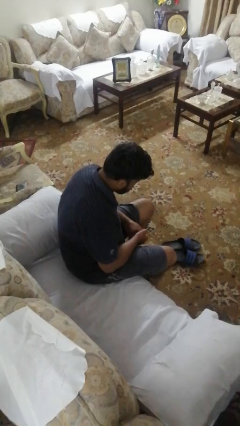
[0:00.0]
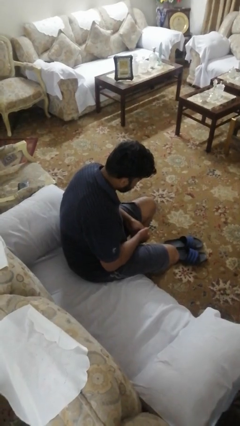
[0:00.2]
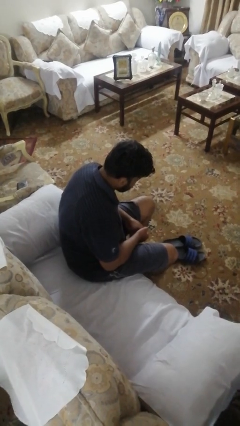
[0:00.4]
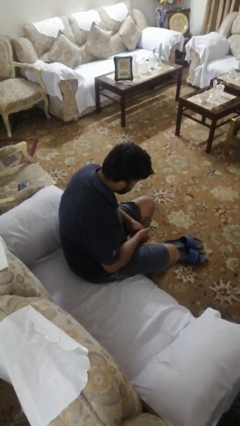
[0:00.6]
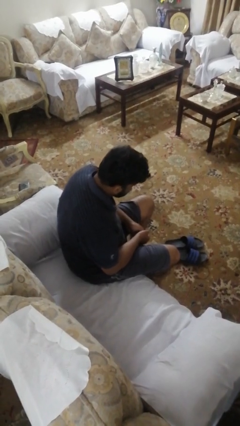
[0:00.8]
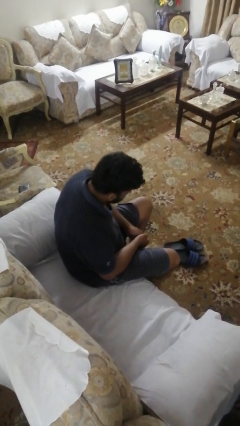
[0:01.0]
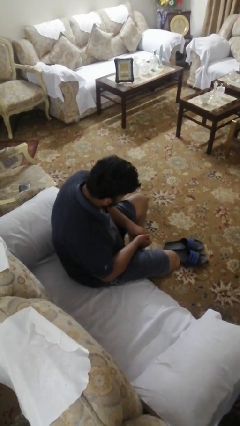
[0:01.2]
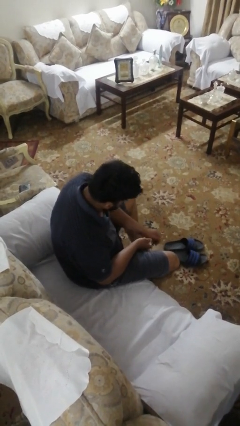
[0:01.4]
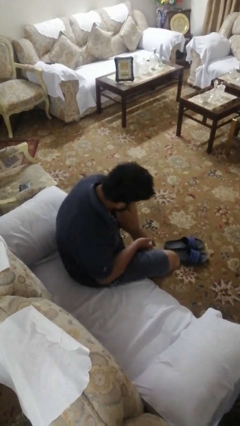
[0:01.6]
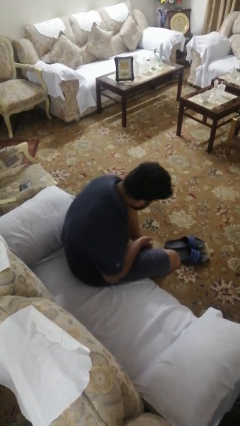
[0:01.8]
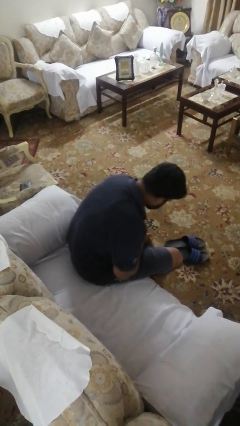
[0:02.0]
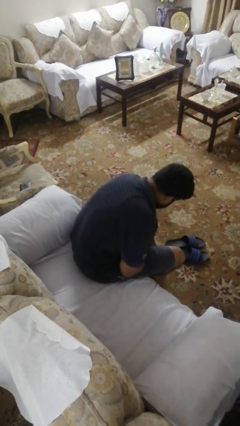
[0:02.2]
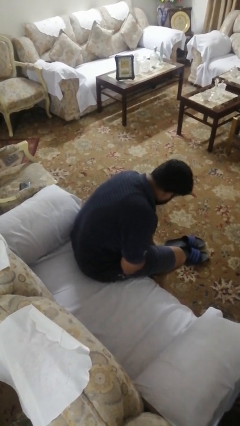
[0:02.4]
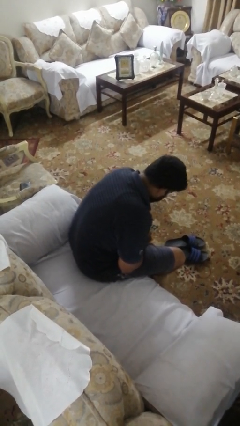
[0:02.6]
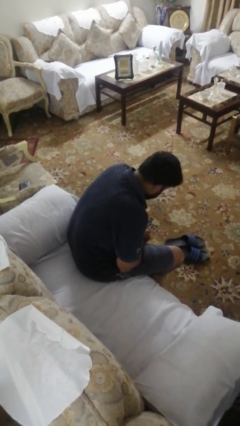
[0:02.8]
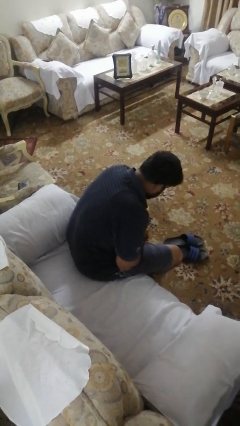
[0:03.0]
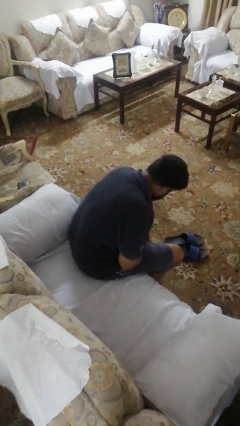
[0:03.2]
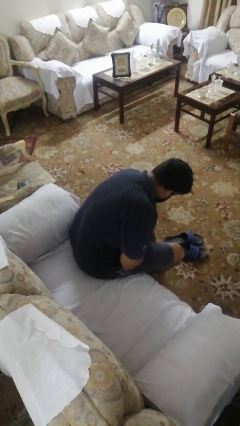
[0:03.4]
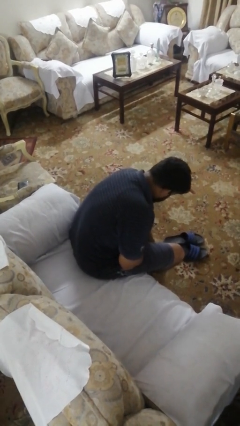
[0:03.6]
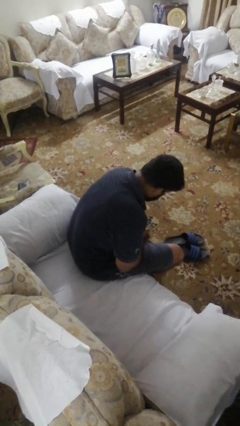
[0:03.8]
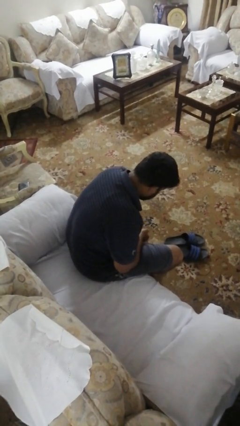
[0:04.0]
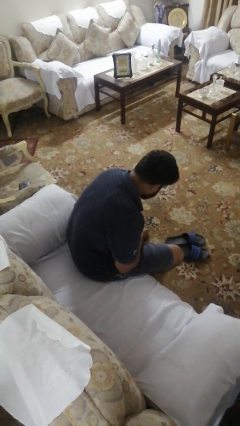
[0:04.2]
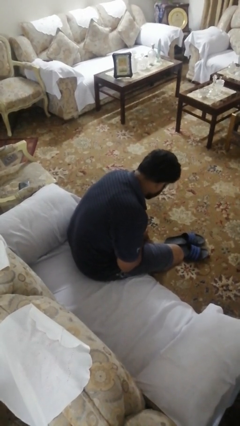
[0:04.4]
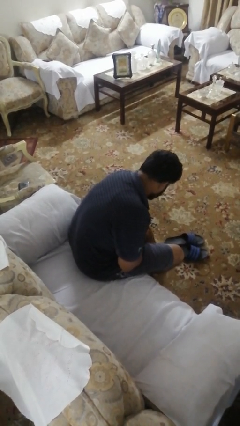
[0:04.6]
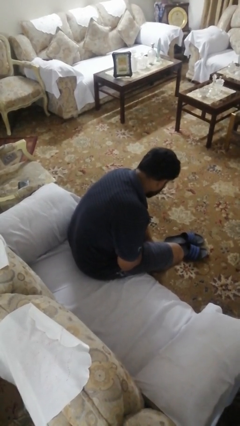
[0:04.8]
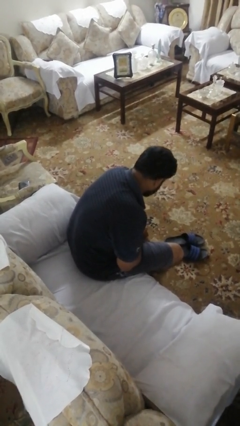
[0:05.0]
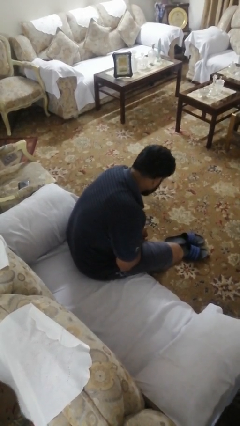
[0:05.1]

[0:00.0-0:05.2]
person rubs foot

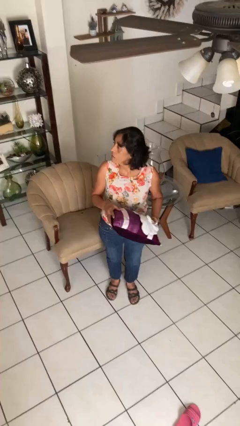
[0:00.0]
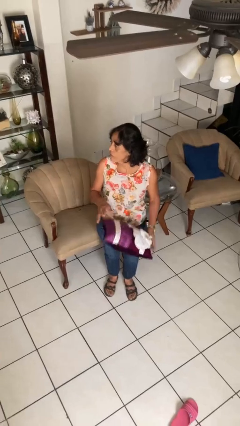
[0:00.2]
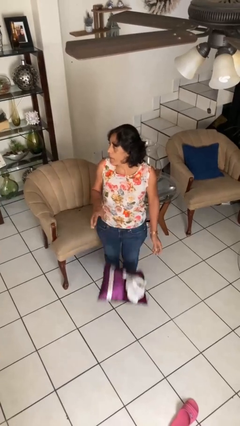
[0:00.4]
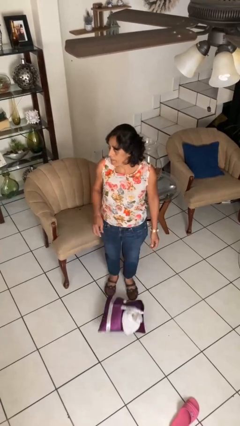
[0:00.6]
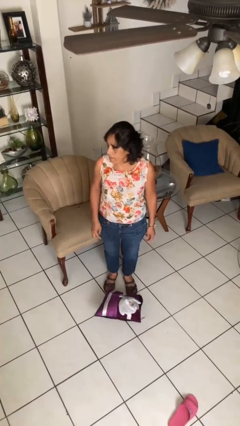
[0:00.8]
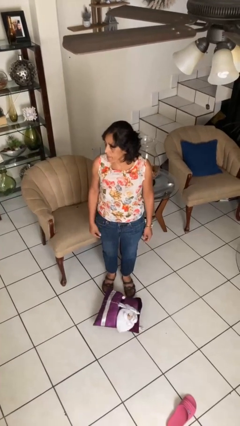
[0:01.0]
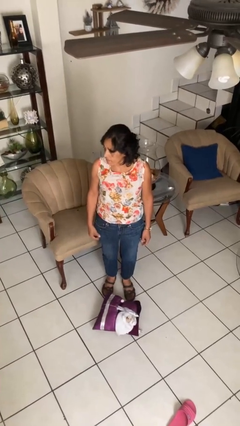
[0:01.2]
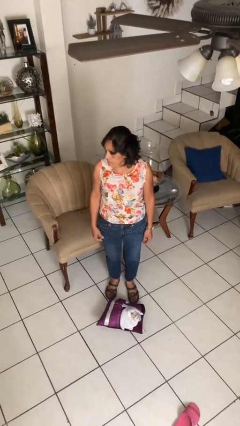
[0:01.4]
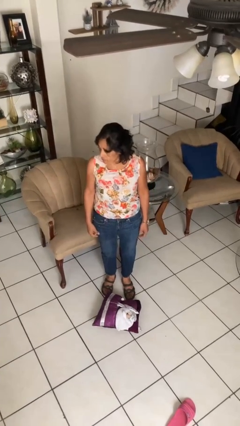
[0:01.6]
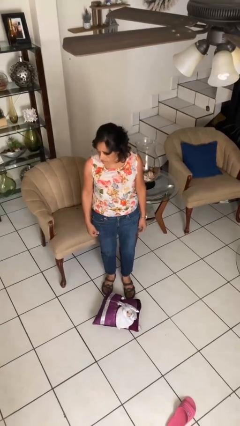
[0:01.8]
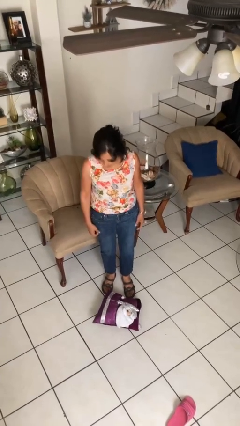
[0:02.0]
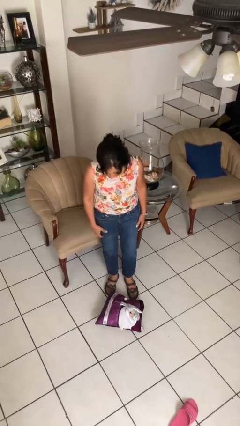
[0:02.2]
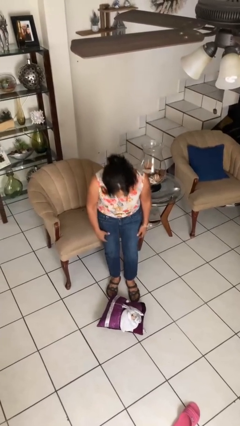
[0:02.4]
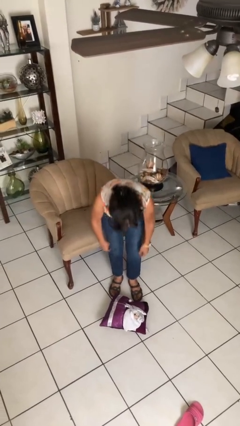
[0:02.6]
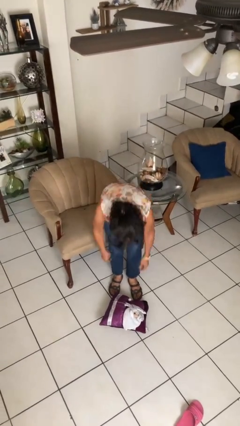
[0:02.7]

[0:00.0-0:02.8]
person drops object

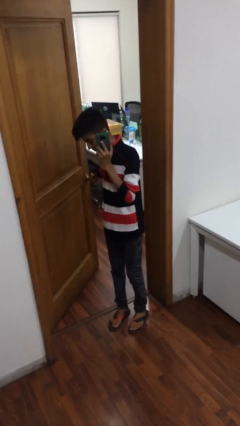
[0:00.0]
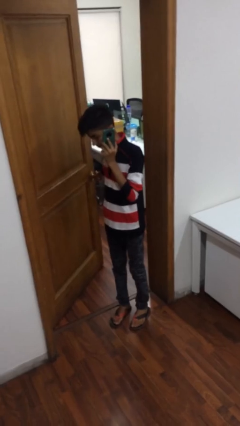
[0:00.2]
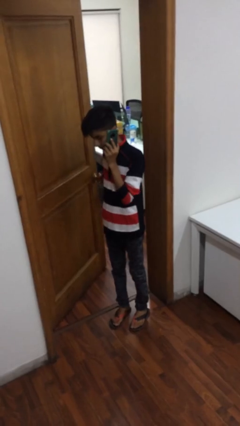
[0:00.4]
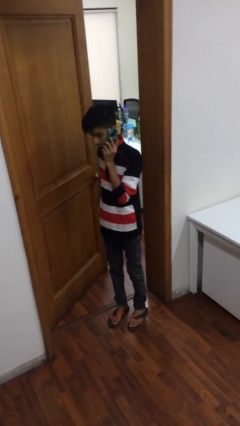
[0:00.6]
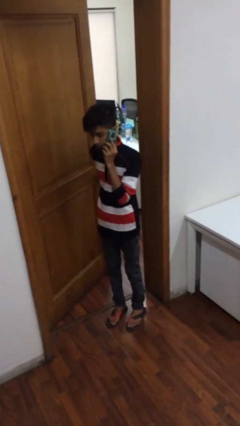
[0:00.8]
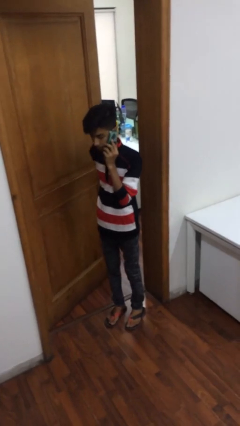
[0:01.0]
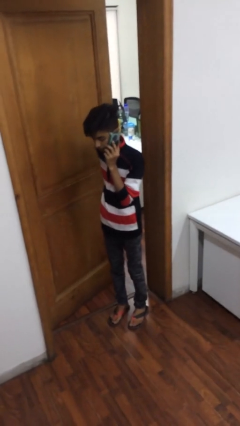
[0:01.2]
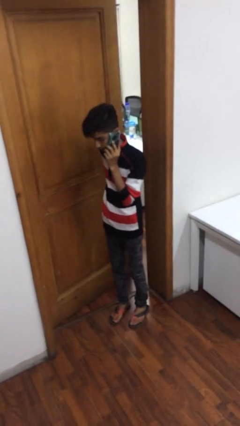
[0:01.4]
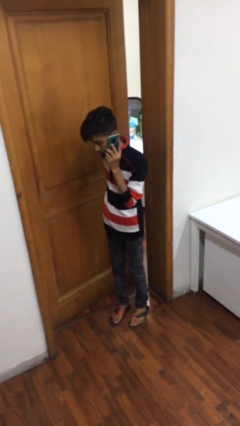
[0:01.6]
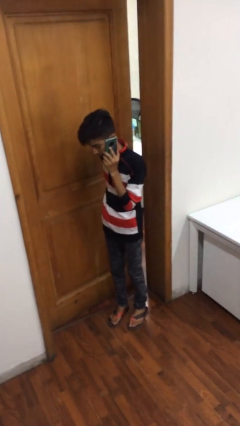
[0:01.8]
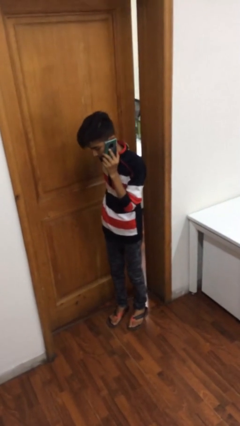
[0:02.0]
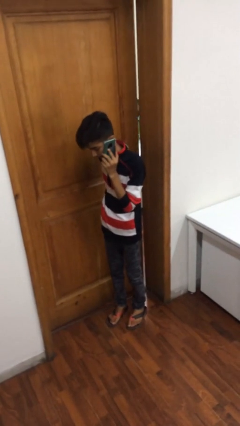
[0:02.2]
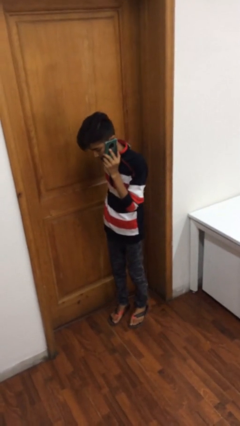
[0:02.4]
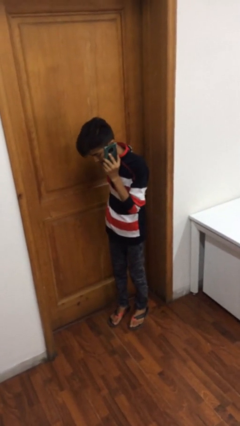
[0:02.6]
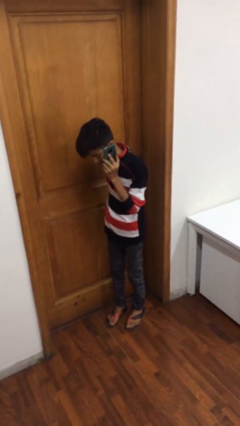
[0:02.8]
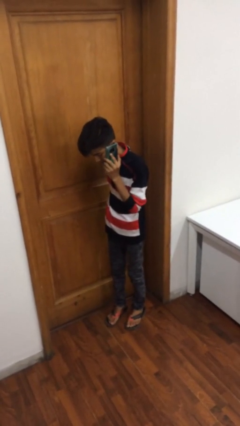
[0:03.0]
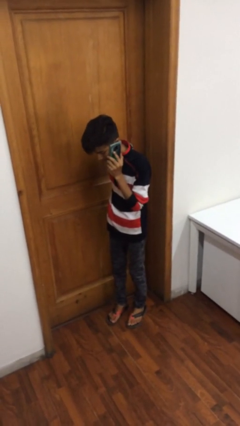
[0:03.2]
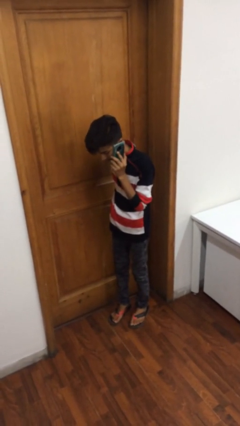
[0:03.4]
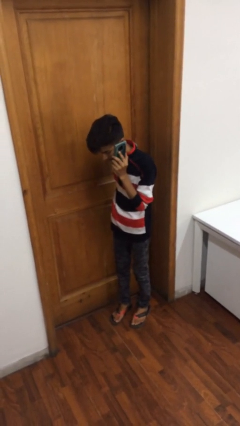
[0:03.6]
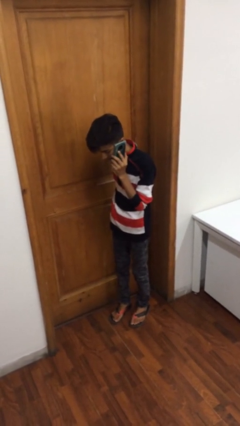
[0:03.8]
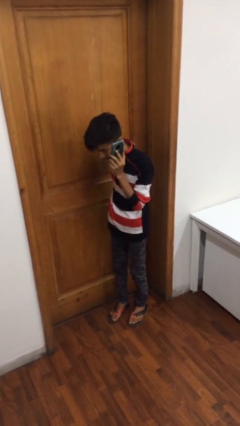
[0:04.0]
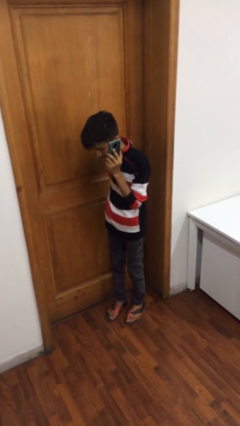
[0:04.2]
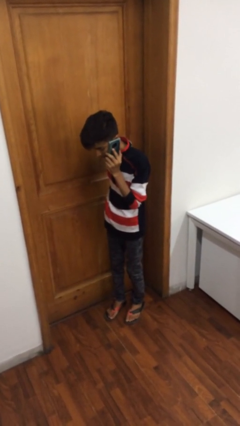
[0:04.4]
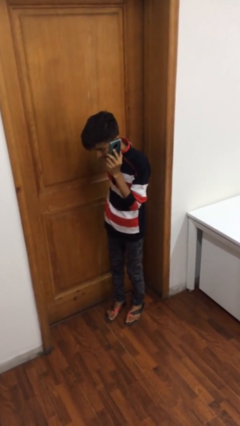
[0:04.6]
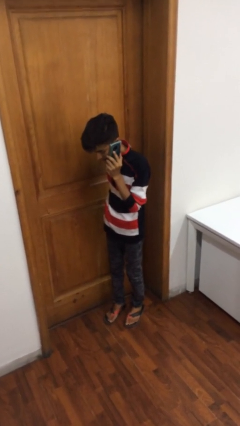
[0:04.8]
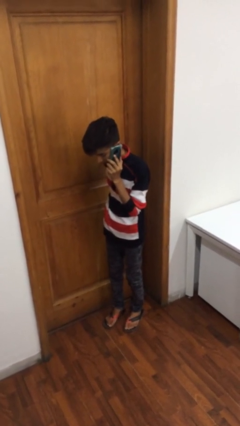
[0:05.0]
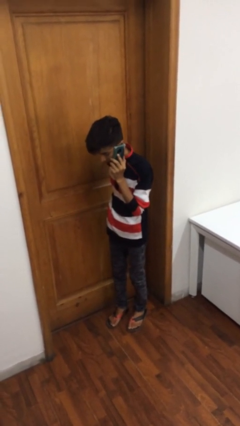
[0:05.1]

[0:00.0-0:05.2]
person closes facility door

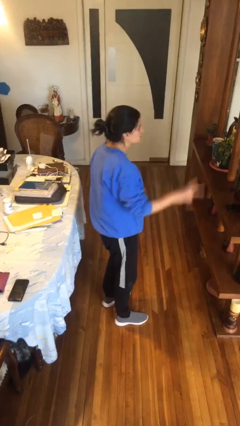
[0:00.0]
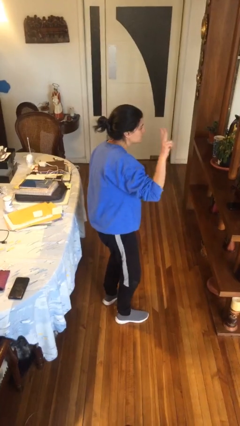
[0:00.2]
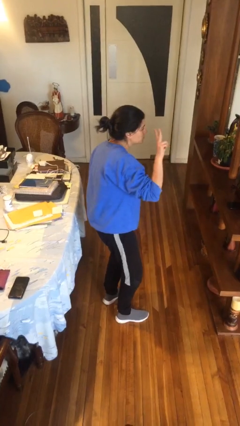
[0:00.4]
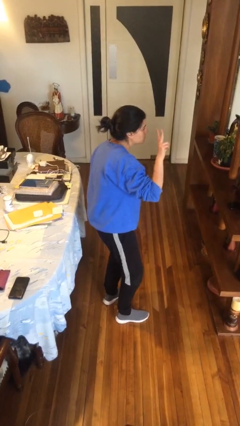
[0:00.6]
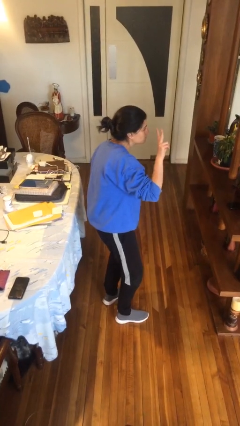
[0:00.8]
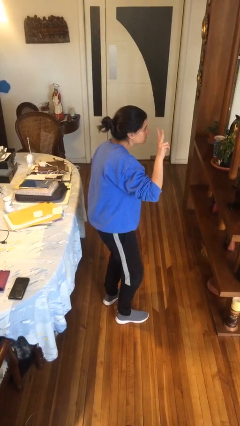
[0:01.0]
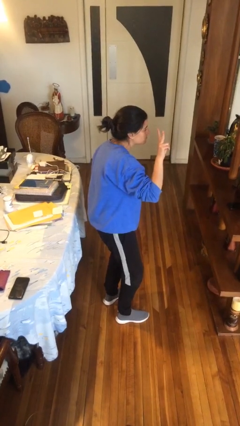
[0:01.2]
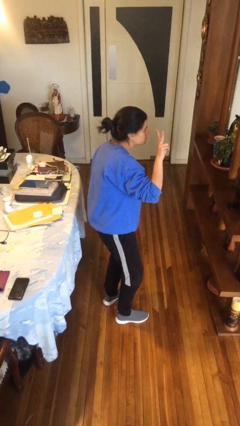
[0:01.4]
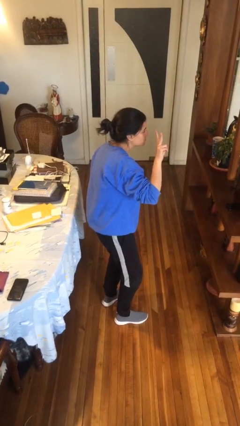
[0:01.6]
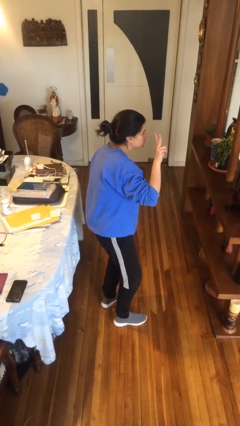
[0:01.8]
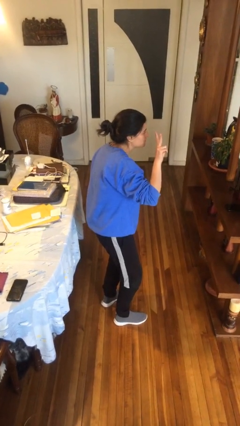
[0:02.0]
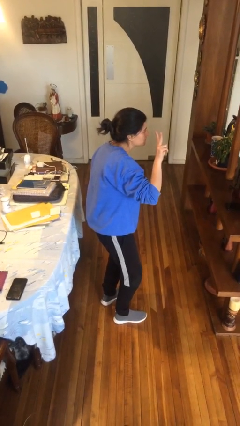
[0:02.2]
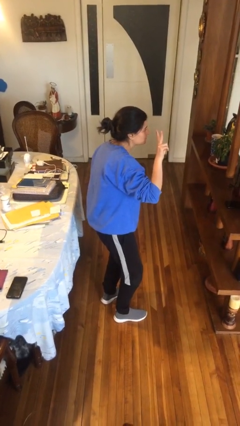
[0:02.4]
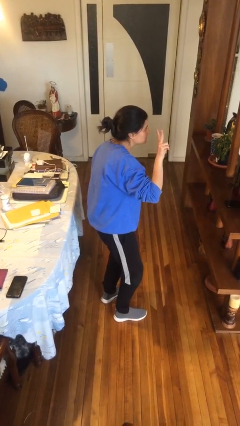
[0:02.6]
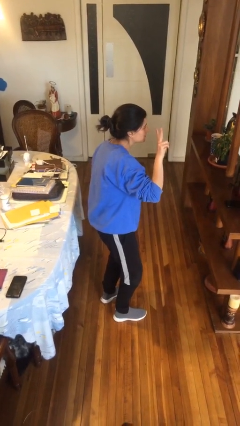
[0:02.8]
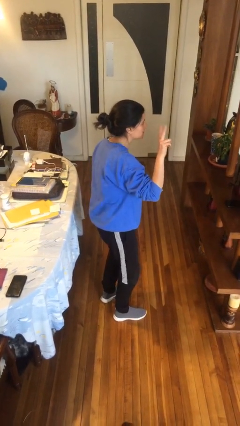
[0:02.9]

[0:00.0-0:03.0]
person gestures peace

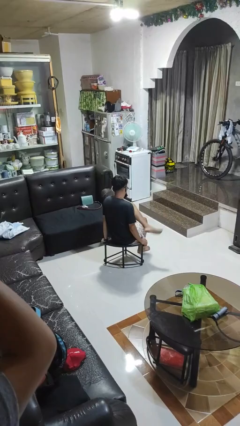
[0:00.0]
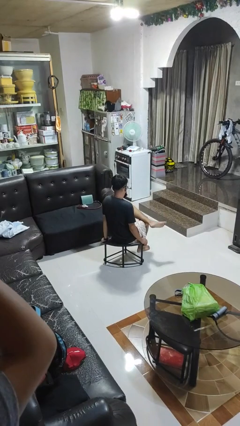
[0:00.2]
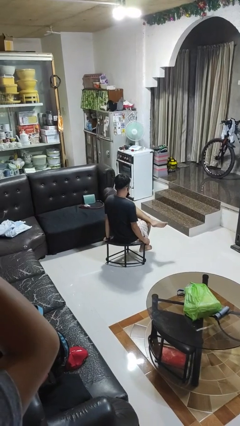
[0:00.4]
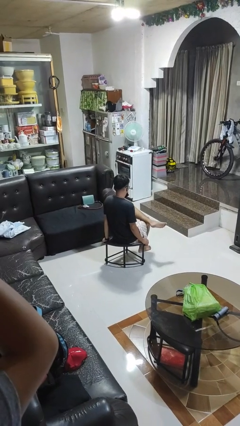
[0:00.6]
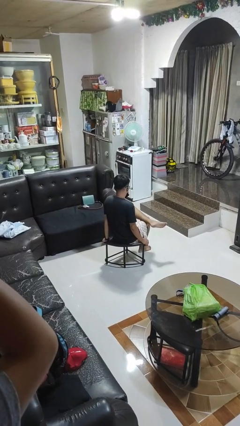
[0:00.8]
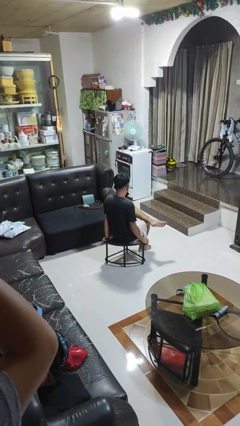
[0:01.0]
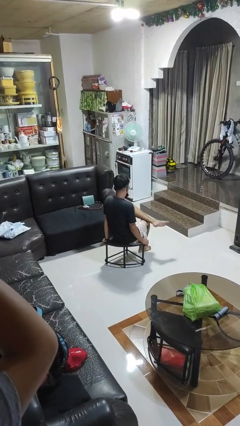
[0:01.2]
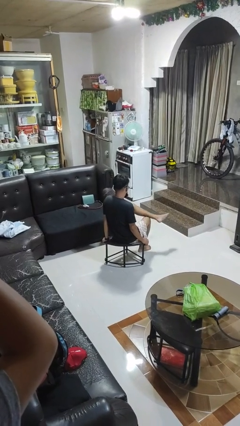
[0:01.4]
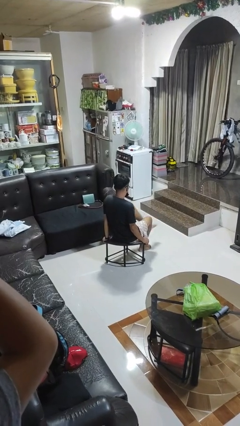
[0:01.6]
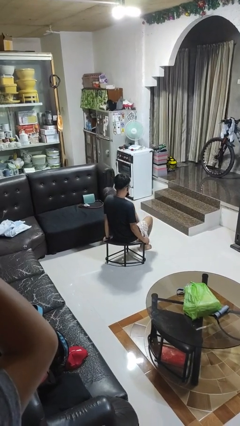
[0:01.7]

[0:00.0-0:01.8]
person crosses legs
